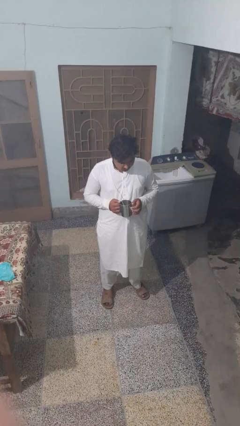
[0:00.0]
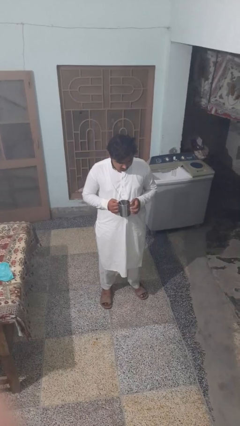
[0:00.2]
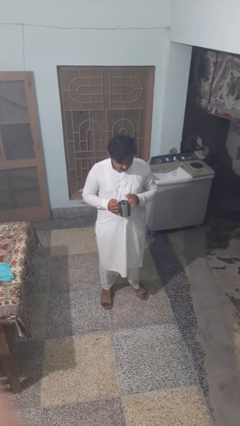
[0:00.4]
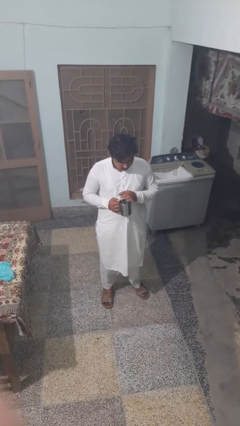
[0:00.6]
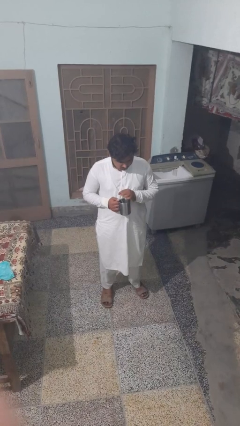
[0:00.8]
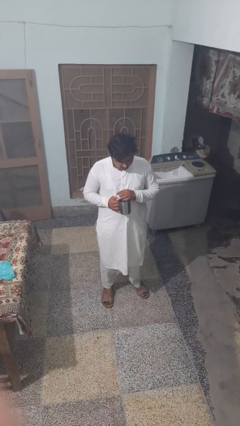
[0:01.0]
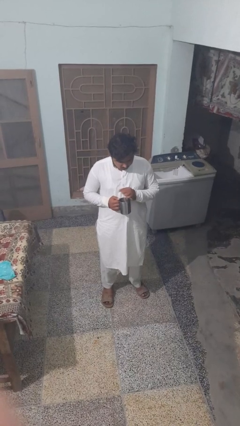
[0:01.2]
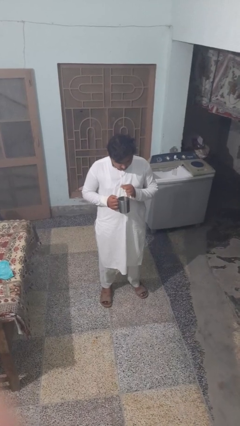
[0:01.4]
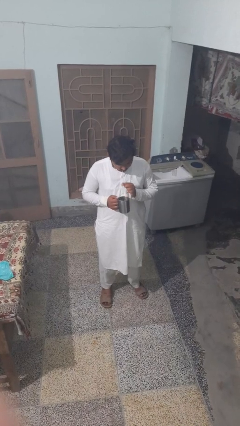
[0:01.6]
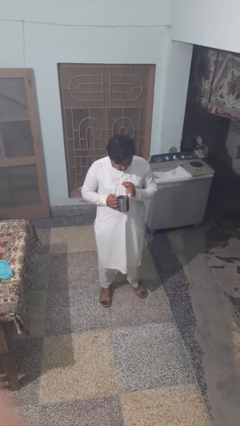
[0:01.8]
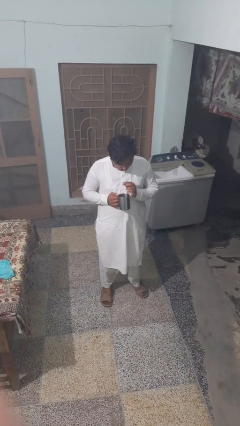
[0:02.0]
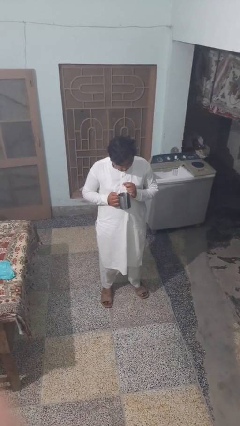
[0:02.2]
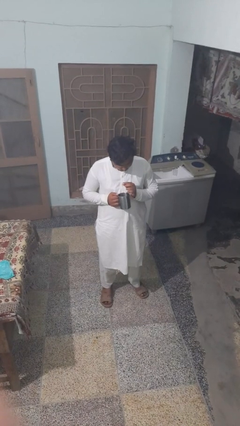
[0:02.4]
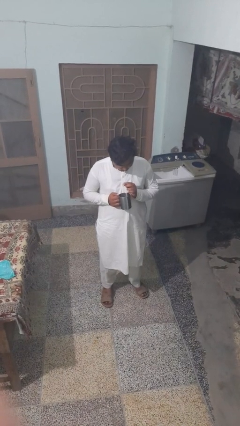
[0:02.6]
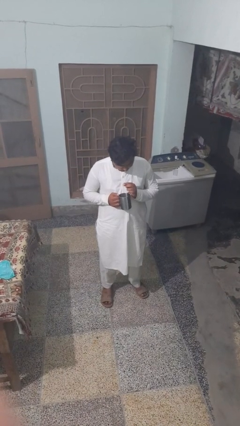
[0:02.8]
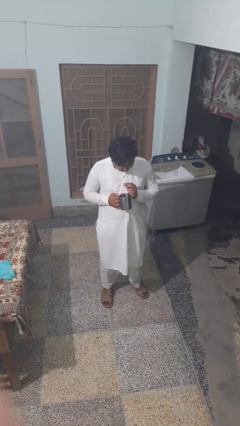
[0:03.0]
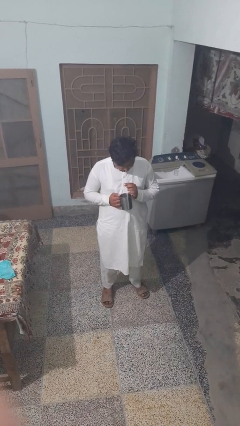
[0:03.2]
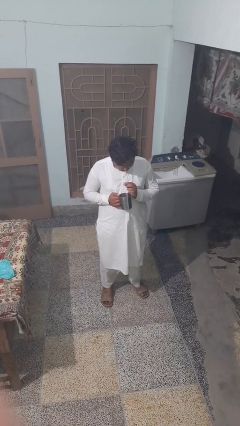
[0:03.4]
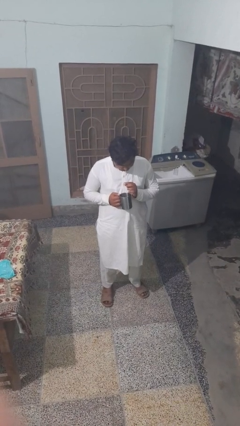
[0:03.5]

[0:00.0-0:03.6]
person drinks from straw

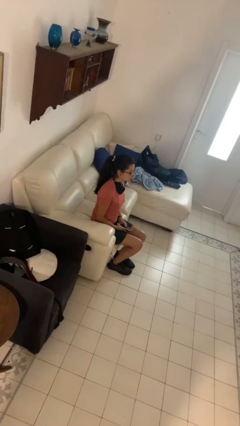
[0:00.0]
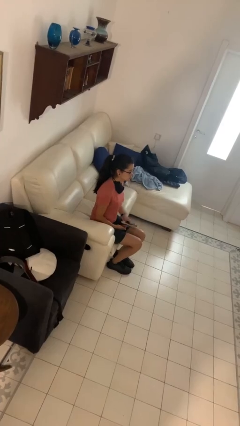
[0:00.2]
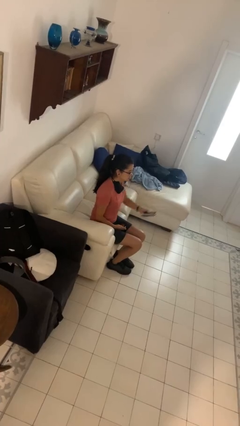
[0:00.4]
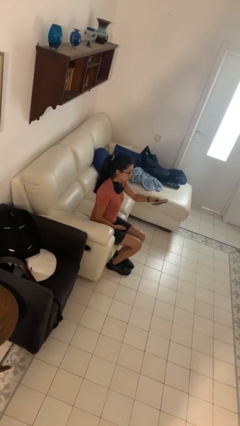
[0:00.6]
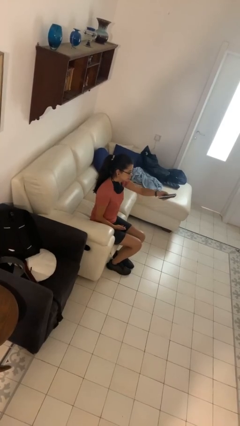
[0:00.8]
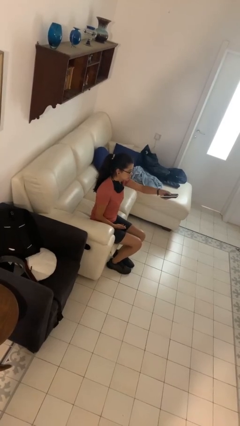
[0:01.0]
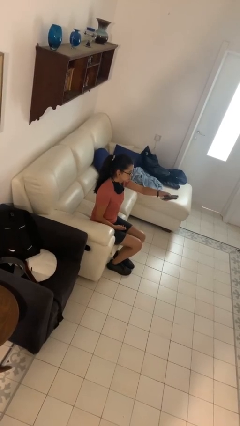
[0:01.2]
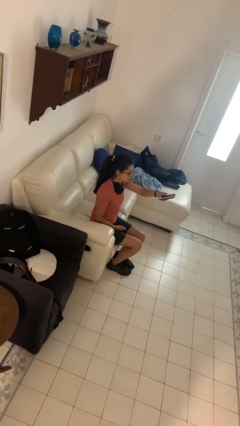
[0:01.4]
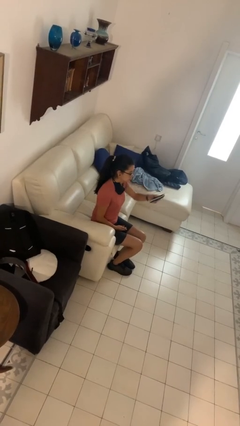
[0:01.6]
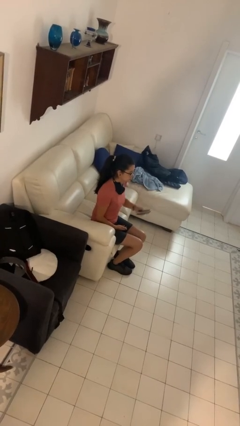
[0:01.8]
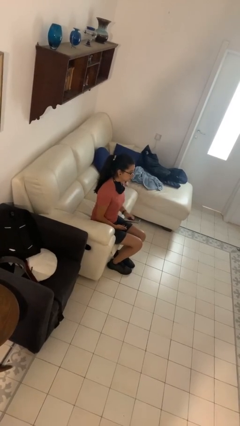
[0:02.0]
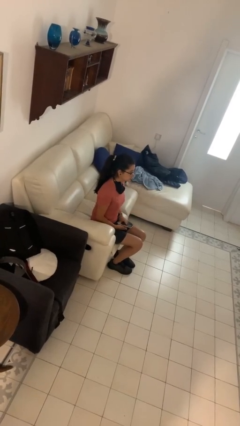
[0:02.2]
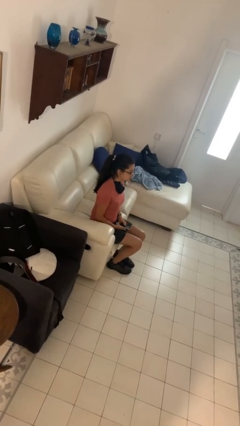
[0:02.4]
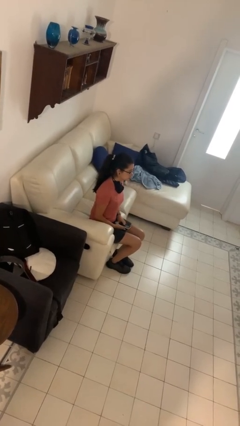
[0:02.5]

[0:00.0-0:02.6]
person uses television remote

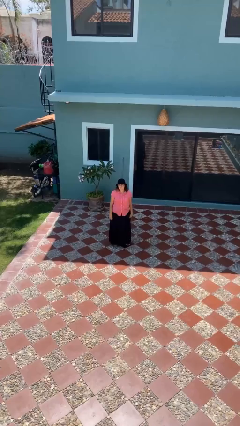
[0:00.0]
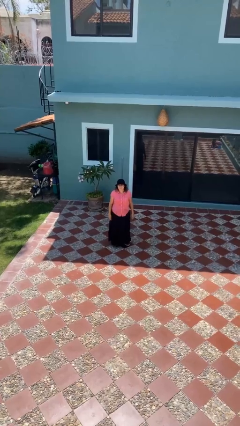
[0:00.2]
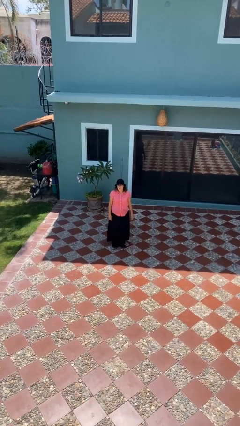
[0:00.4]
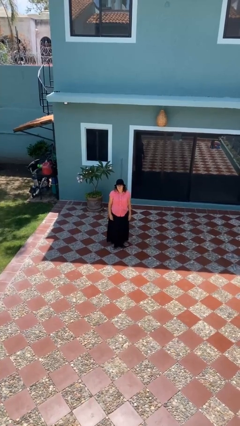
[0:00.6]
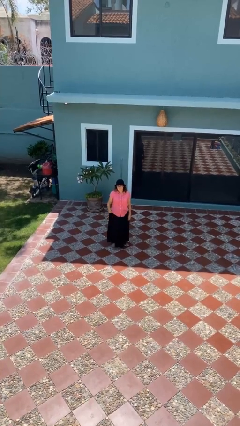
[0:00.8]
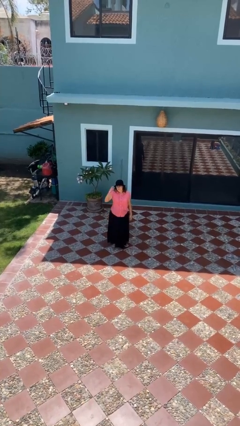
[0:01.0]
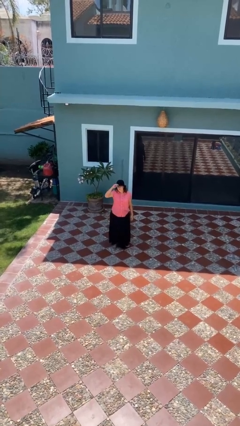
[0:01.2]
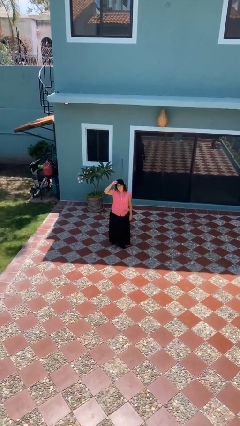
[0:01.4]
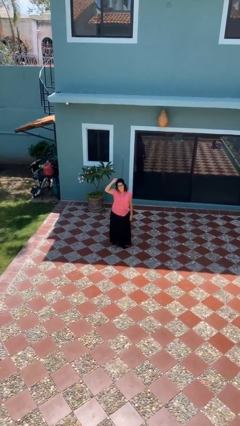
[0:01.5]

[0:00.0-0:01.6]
person takes off hat

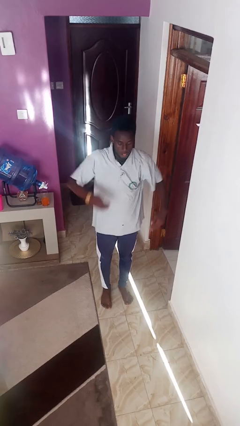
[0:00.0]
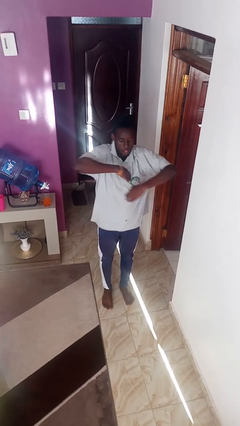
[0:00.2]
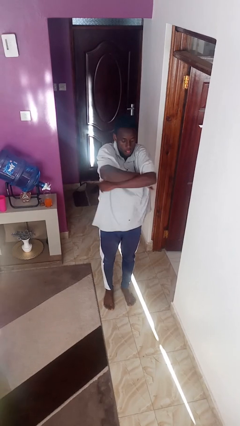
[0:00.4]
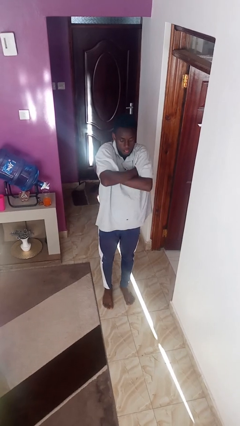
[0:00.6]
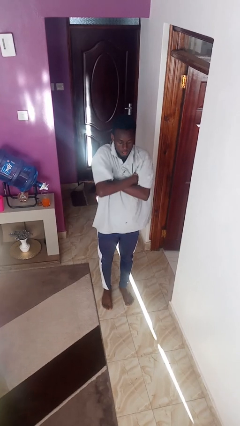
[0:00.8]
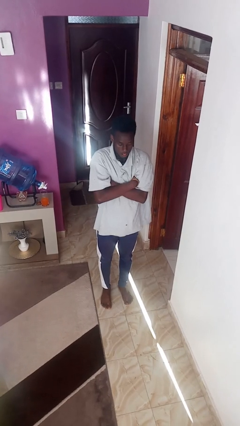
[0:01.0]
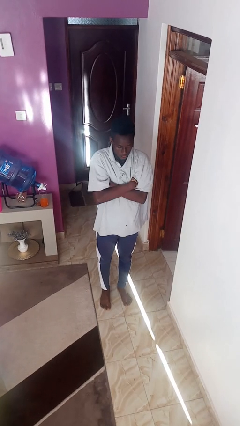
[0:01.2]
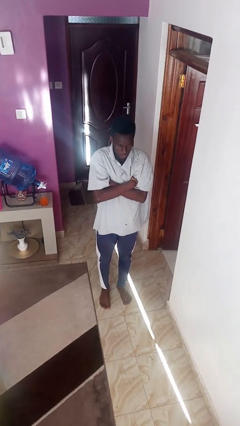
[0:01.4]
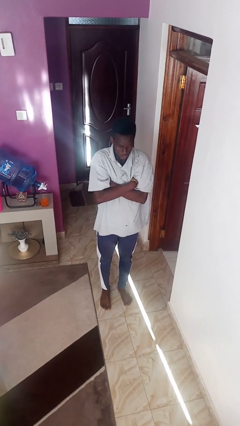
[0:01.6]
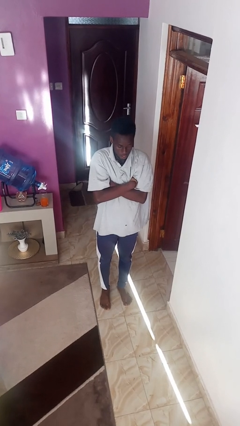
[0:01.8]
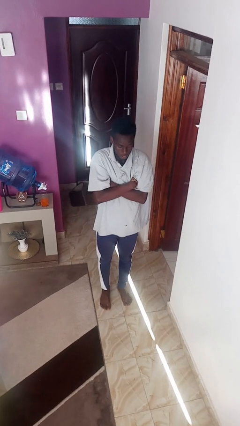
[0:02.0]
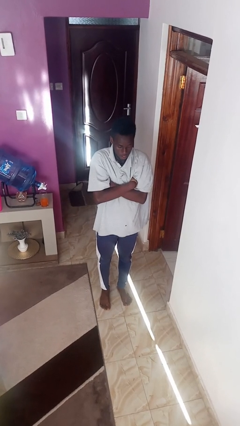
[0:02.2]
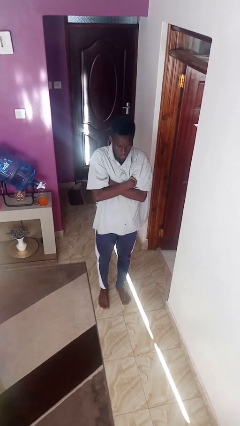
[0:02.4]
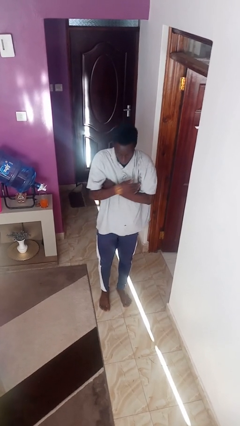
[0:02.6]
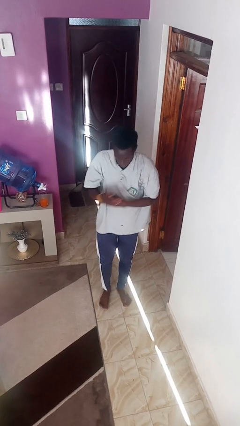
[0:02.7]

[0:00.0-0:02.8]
person crosses arms

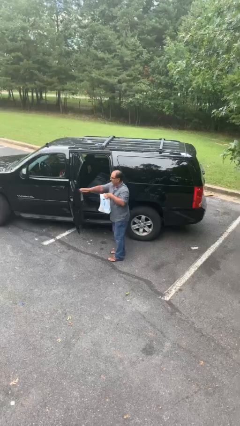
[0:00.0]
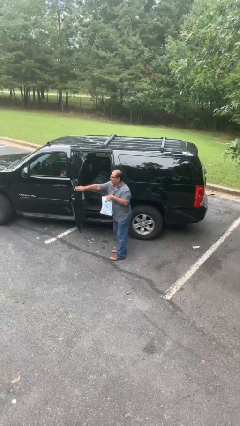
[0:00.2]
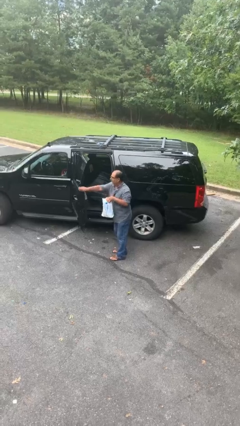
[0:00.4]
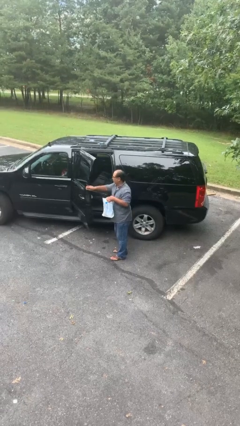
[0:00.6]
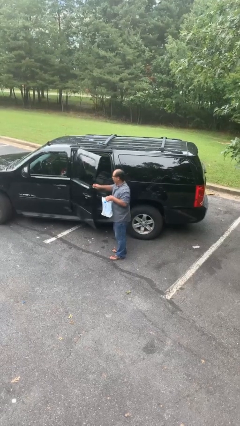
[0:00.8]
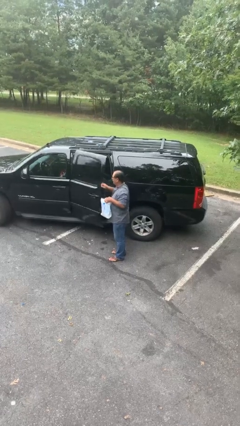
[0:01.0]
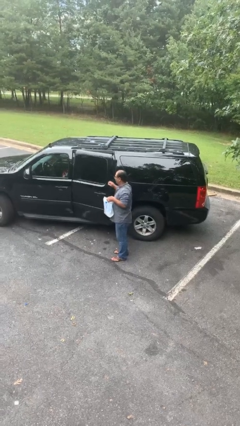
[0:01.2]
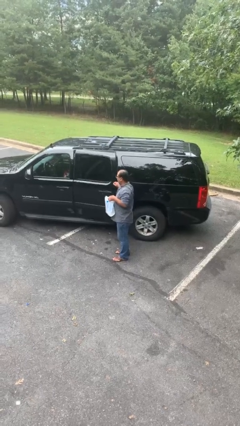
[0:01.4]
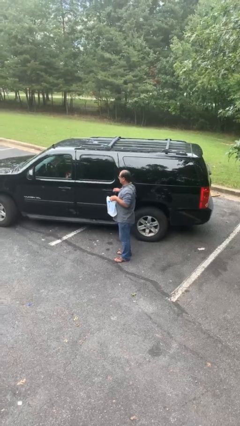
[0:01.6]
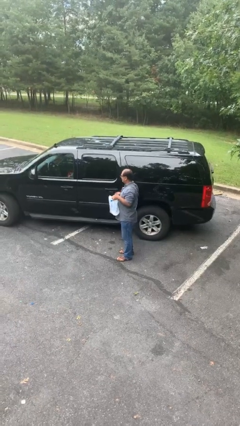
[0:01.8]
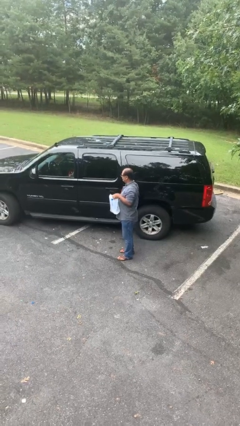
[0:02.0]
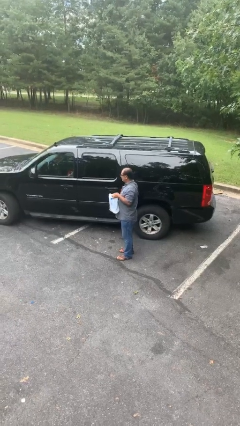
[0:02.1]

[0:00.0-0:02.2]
person closes car door

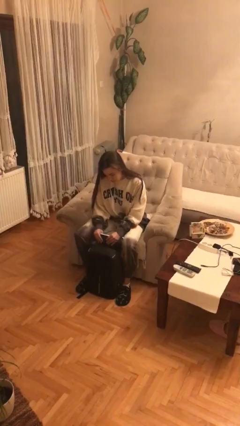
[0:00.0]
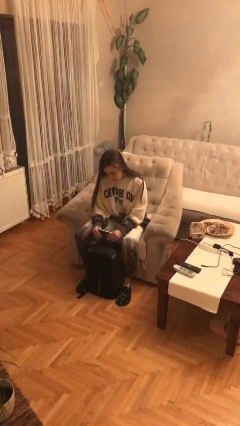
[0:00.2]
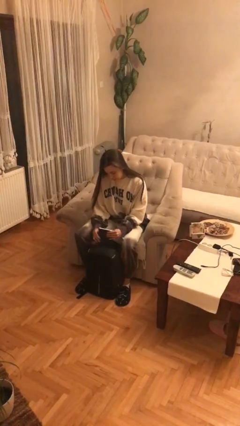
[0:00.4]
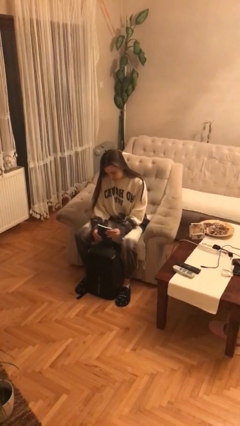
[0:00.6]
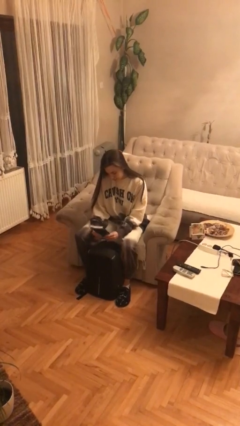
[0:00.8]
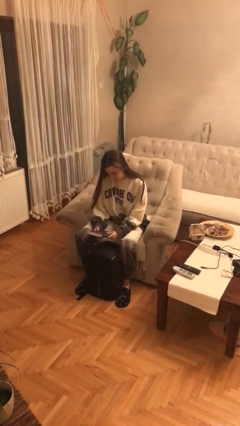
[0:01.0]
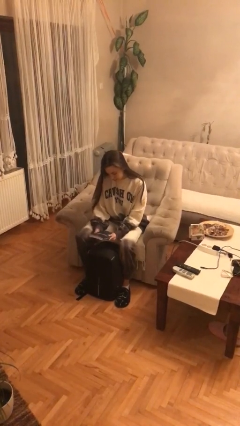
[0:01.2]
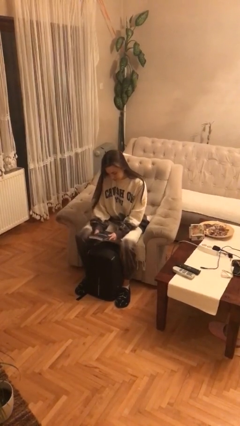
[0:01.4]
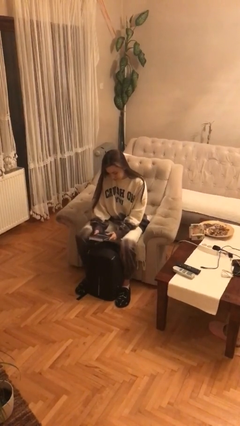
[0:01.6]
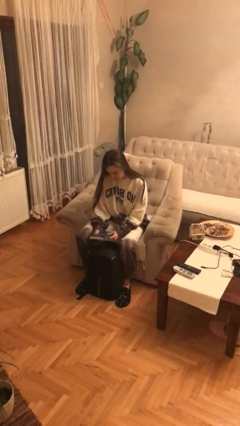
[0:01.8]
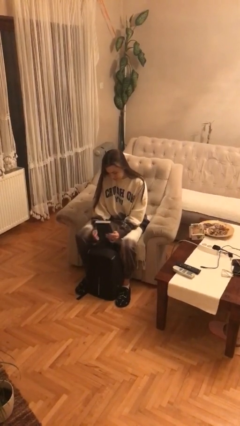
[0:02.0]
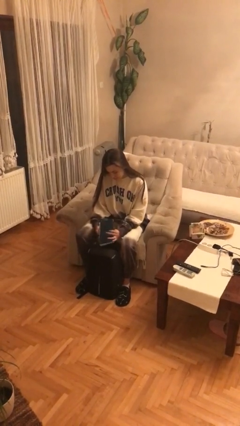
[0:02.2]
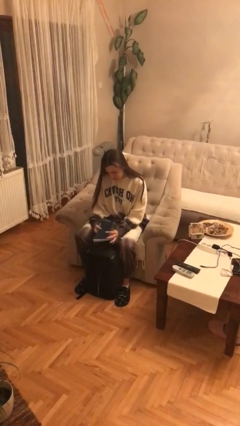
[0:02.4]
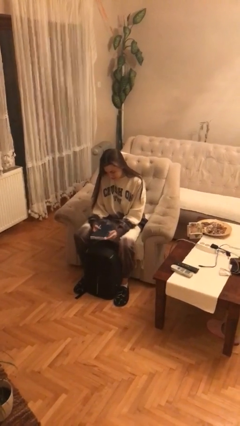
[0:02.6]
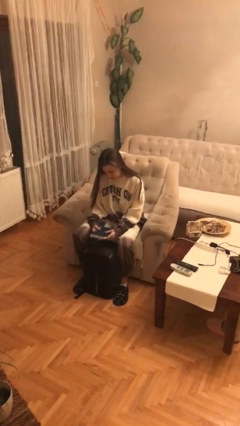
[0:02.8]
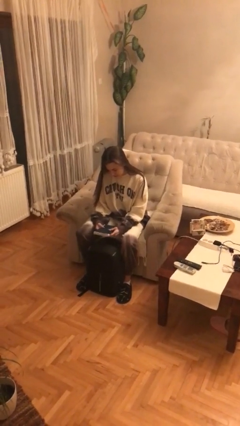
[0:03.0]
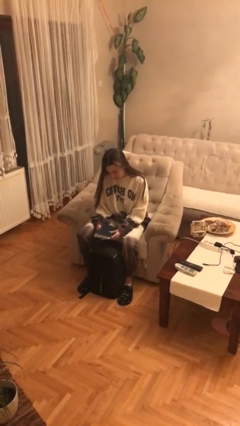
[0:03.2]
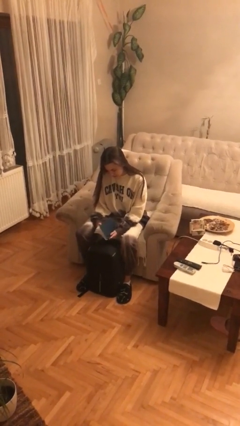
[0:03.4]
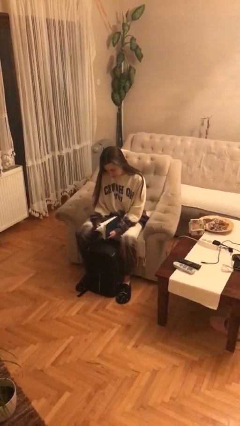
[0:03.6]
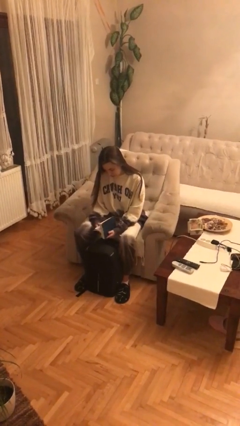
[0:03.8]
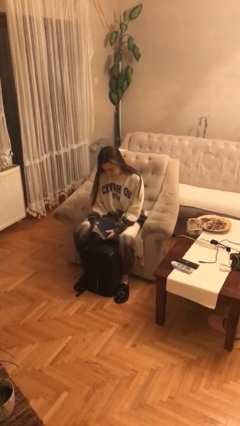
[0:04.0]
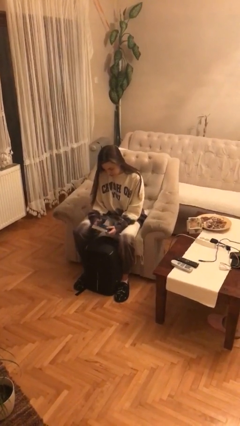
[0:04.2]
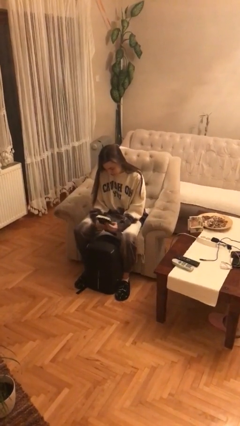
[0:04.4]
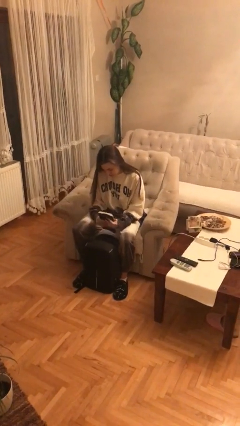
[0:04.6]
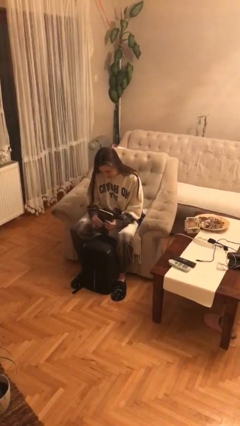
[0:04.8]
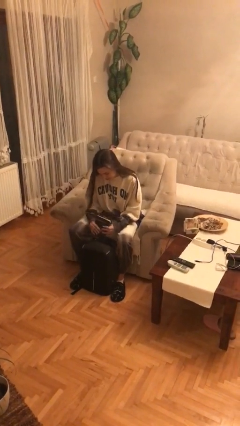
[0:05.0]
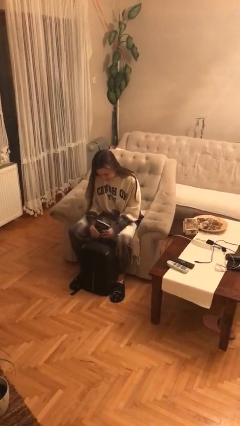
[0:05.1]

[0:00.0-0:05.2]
person takes object from backpack
